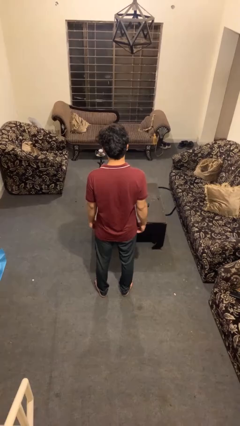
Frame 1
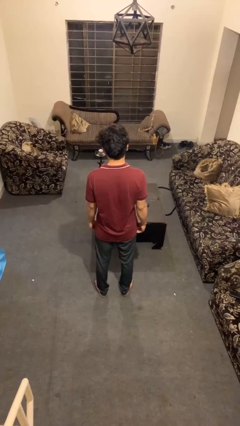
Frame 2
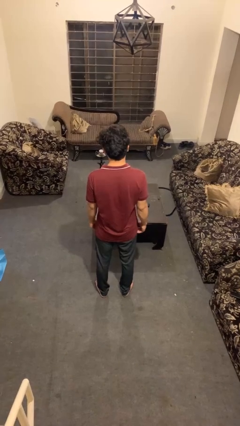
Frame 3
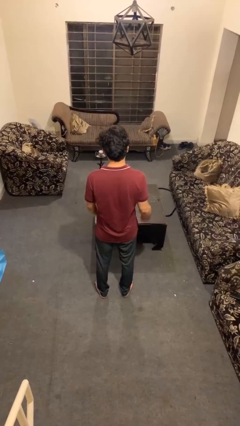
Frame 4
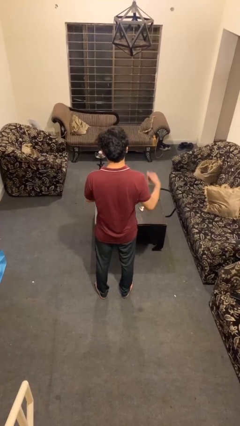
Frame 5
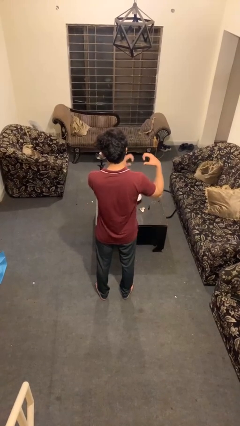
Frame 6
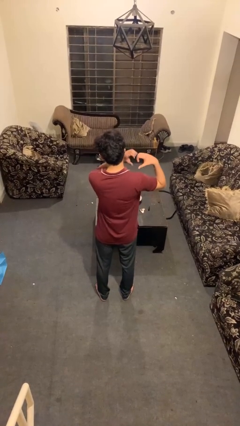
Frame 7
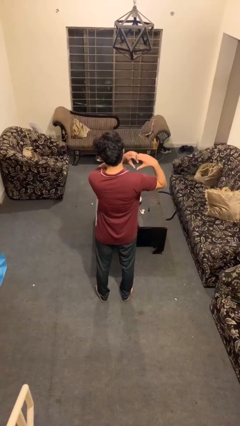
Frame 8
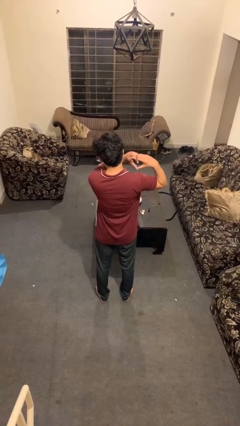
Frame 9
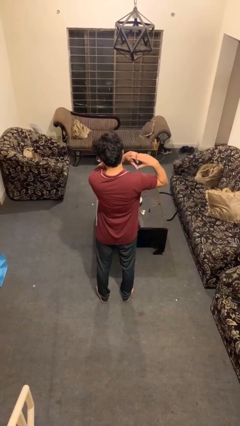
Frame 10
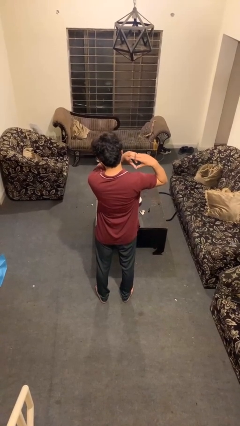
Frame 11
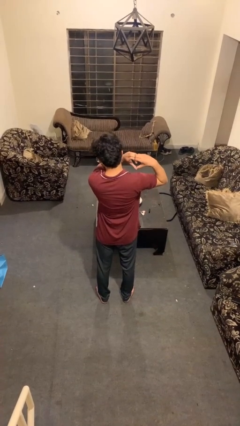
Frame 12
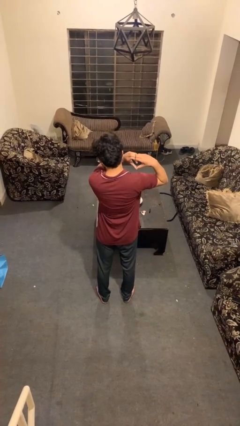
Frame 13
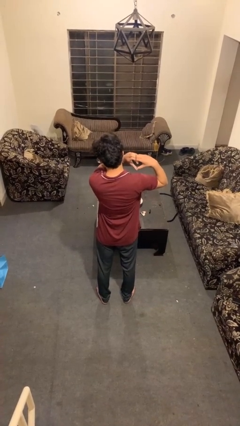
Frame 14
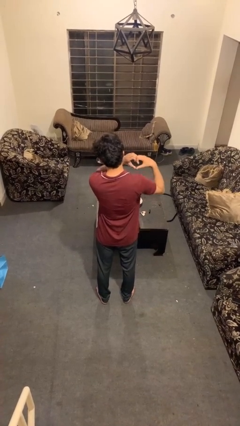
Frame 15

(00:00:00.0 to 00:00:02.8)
person gestures heart

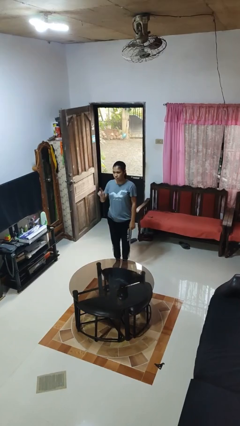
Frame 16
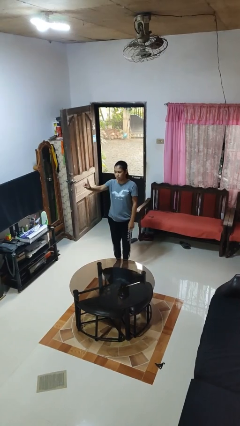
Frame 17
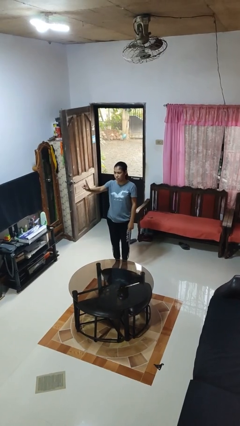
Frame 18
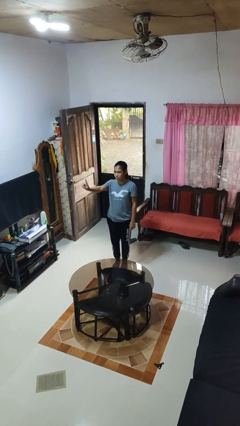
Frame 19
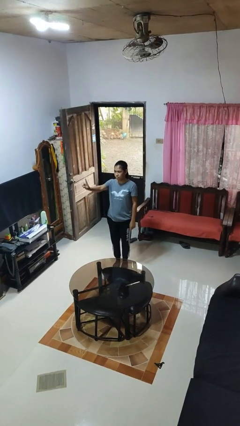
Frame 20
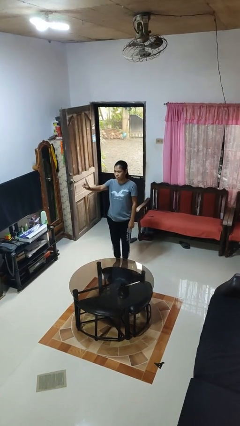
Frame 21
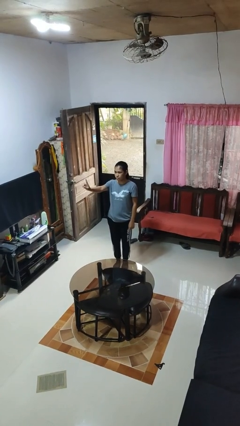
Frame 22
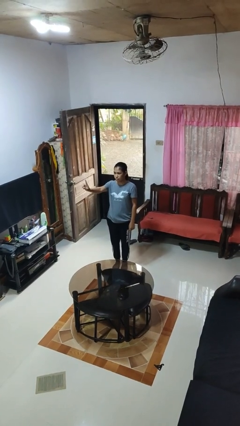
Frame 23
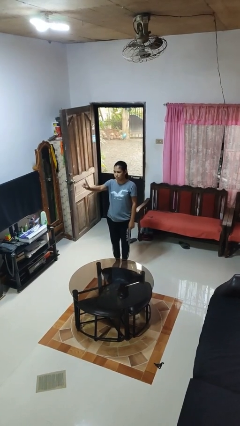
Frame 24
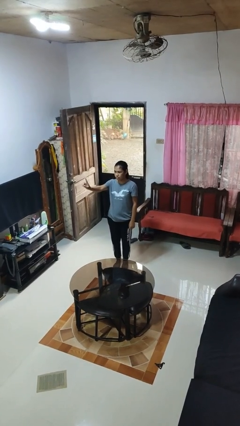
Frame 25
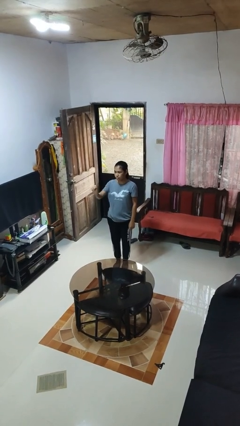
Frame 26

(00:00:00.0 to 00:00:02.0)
person gestures number one

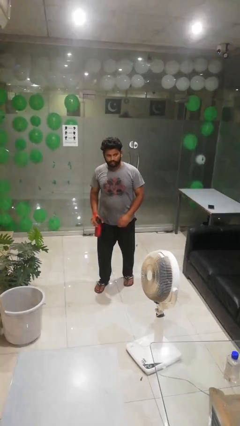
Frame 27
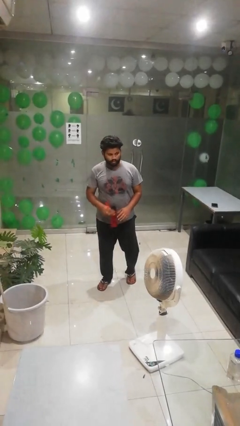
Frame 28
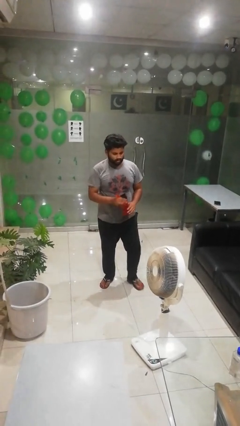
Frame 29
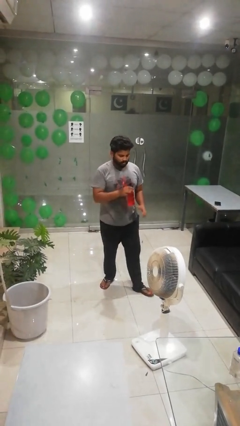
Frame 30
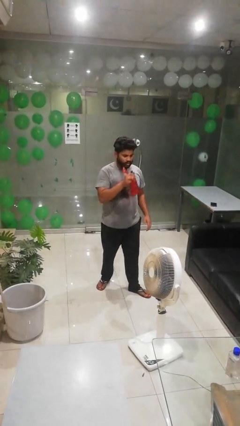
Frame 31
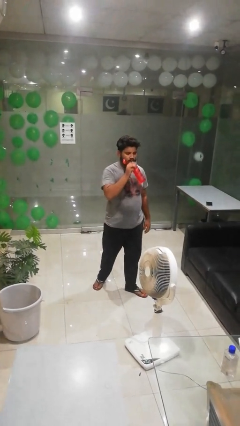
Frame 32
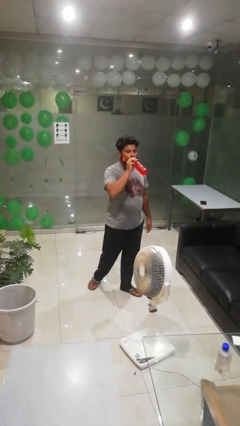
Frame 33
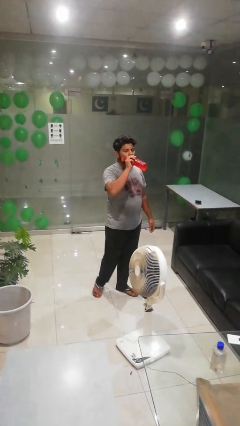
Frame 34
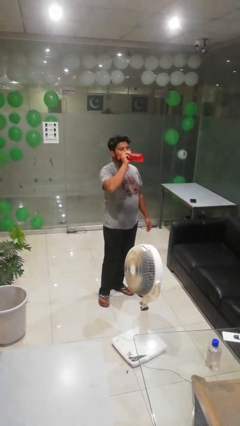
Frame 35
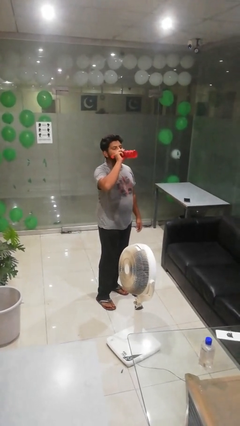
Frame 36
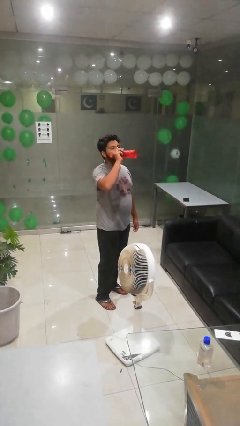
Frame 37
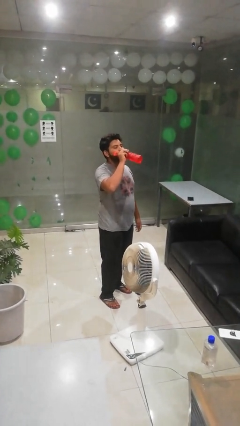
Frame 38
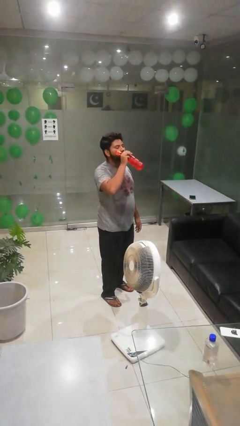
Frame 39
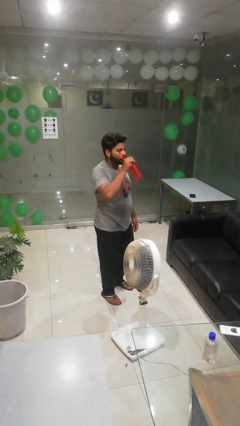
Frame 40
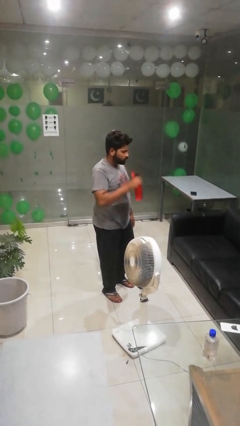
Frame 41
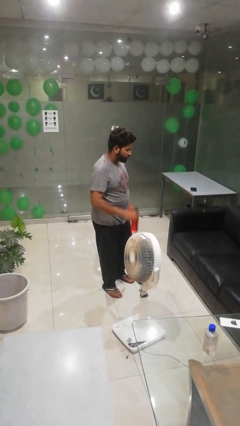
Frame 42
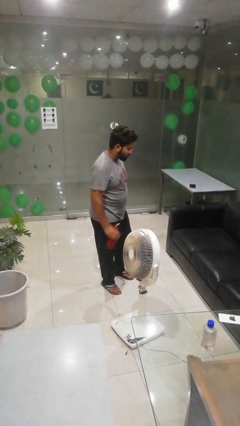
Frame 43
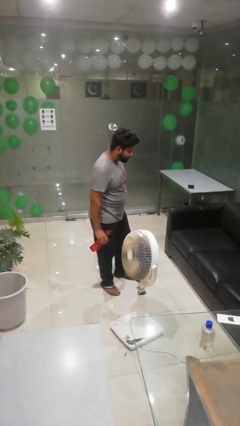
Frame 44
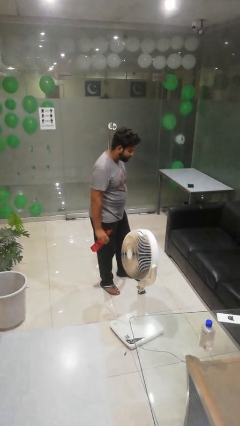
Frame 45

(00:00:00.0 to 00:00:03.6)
person drinks from bottle

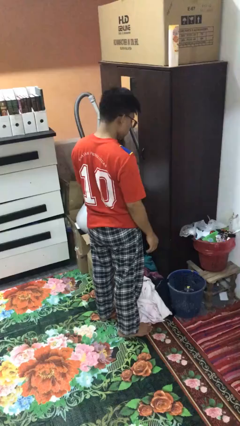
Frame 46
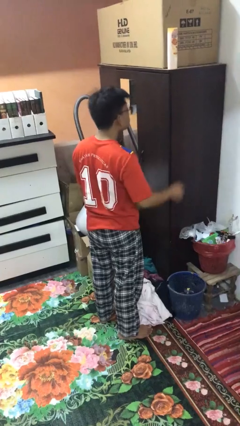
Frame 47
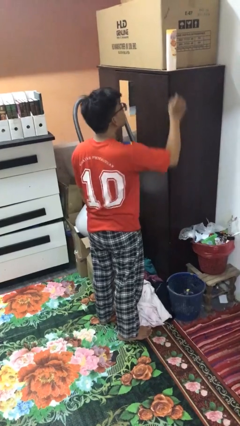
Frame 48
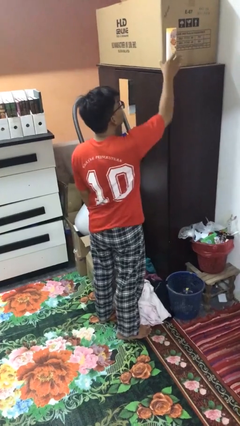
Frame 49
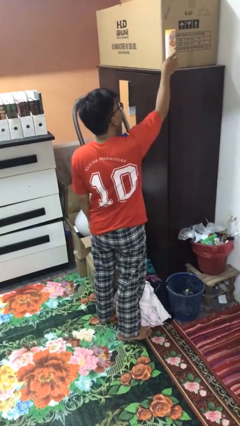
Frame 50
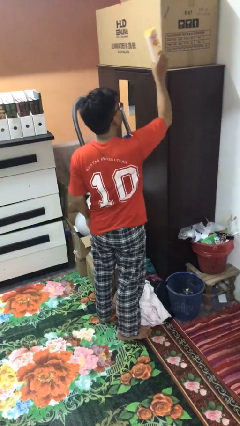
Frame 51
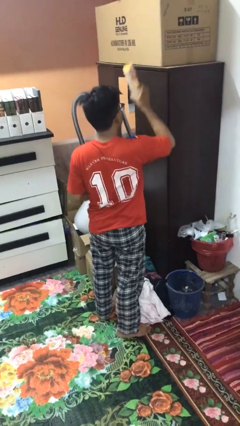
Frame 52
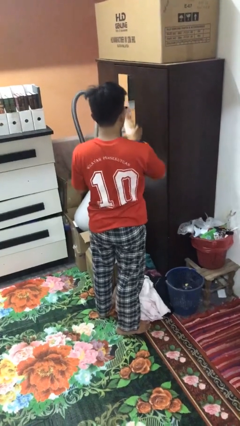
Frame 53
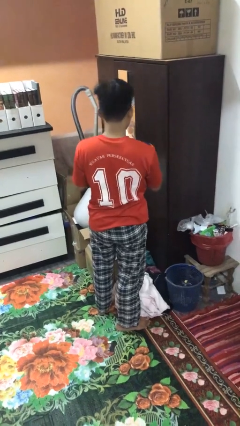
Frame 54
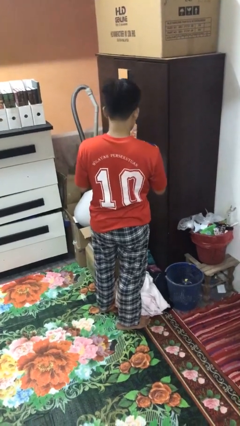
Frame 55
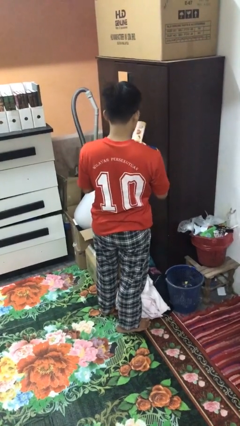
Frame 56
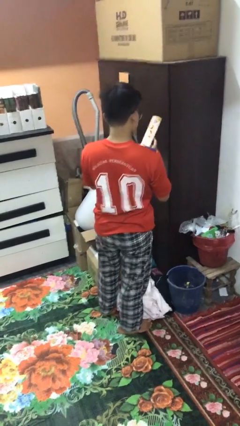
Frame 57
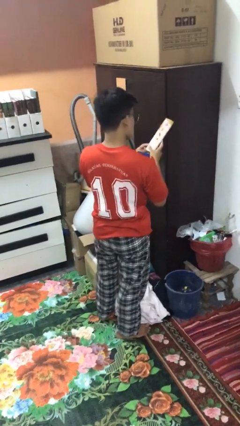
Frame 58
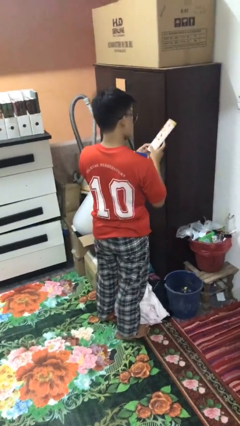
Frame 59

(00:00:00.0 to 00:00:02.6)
person picks up object from shelf

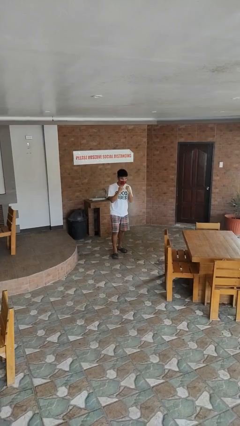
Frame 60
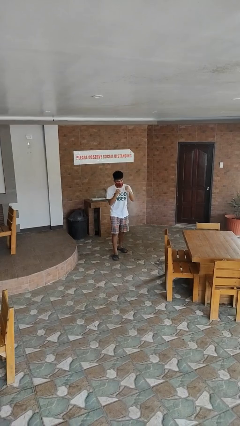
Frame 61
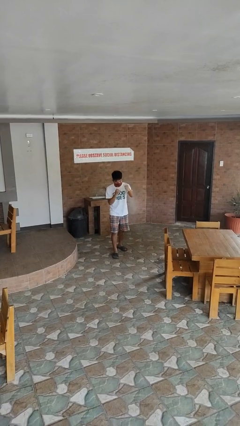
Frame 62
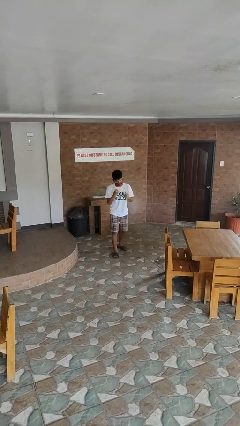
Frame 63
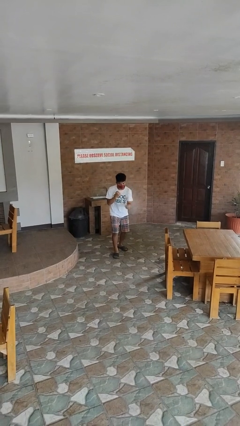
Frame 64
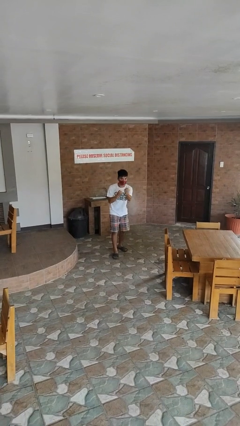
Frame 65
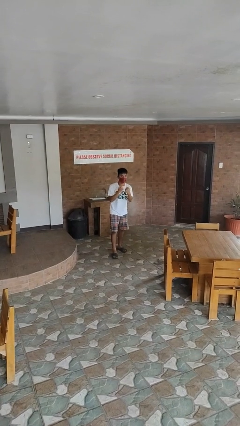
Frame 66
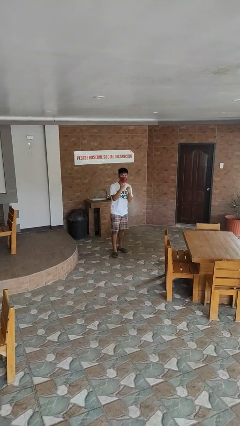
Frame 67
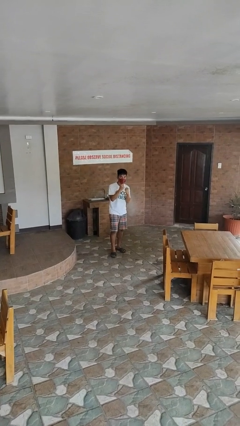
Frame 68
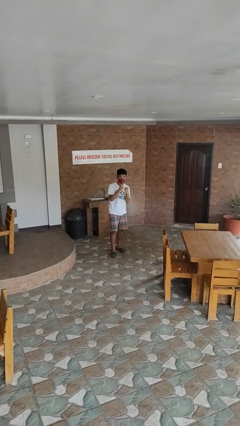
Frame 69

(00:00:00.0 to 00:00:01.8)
person punches

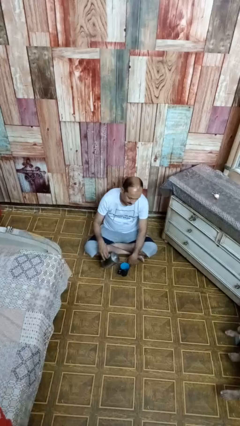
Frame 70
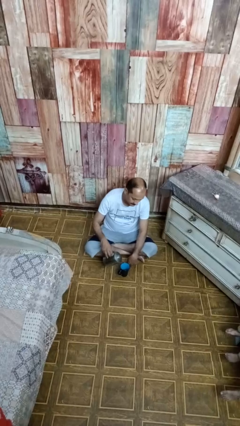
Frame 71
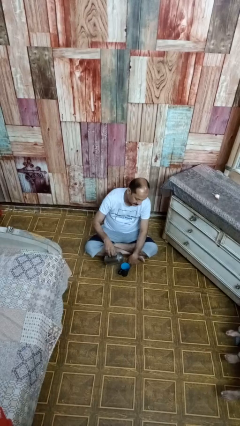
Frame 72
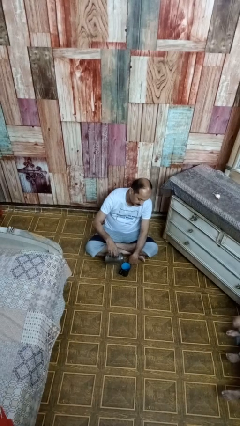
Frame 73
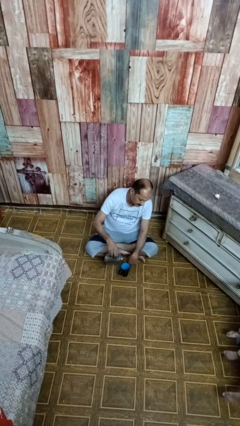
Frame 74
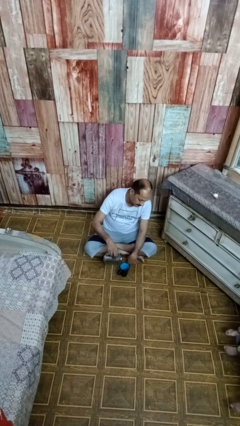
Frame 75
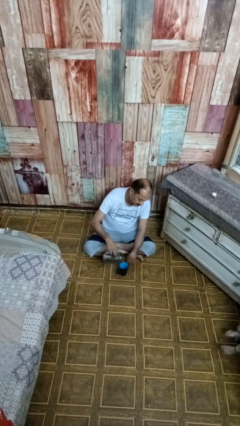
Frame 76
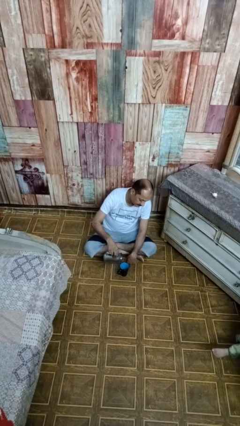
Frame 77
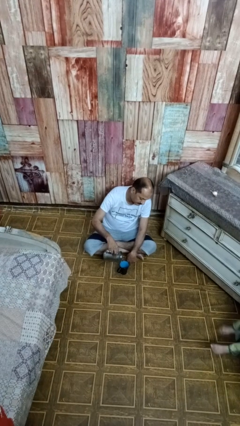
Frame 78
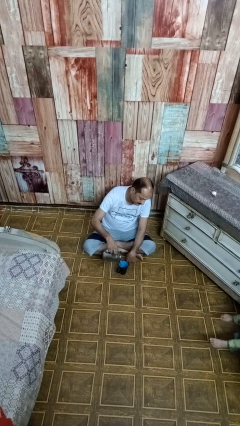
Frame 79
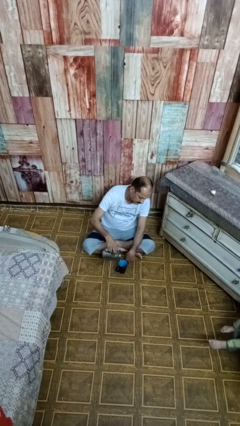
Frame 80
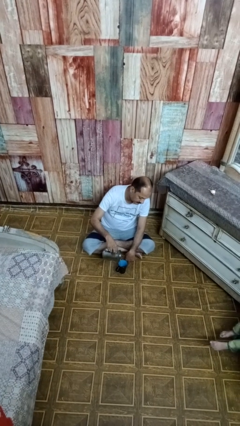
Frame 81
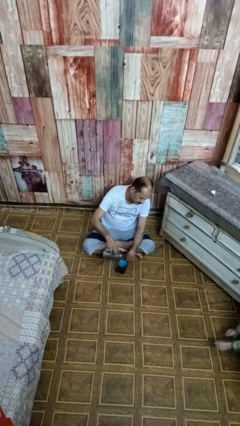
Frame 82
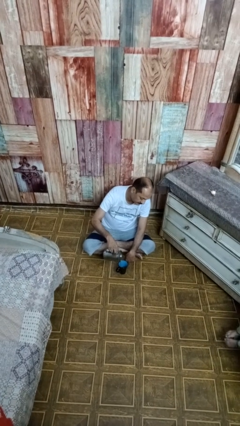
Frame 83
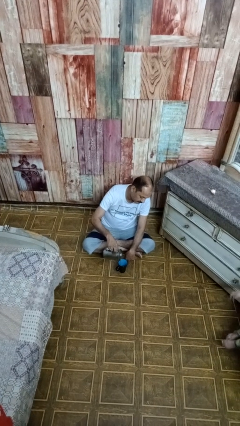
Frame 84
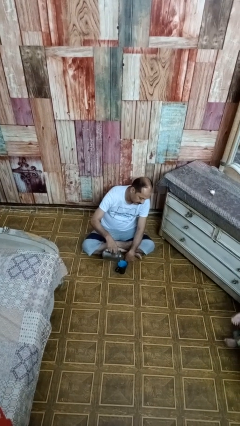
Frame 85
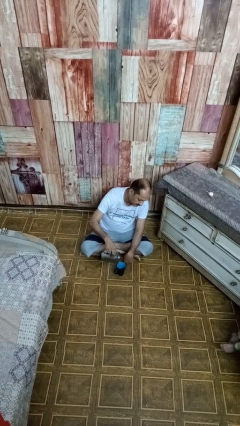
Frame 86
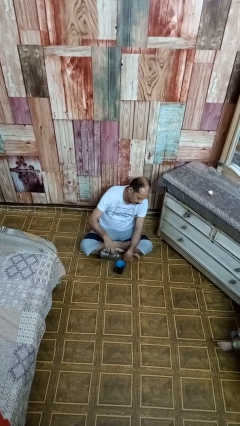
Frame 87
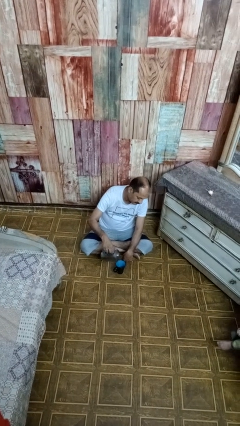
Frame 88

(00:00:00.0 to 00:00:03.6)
person pours coffee into mug

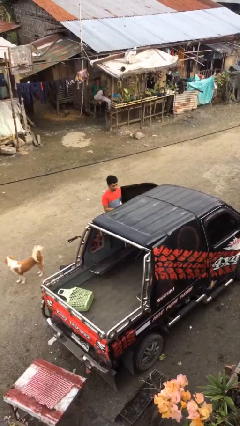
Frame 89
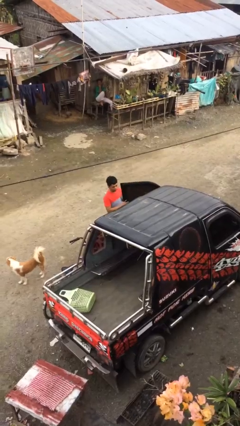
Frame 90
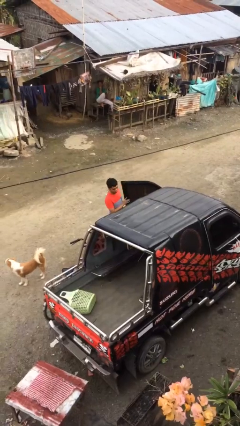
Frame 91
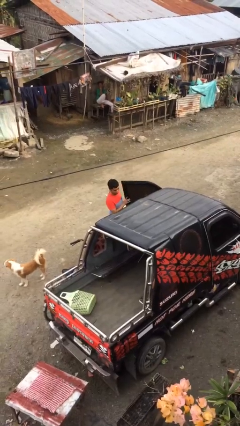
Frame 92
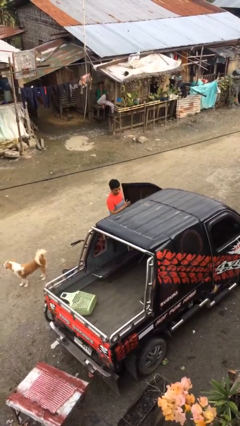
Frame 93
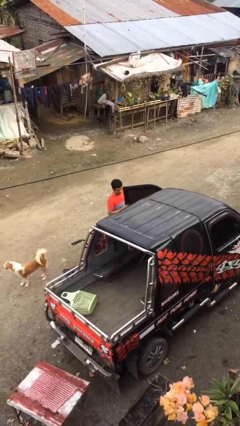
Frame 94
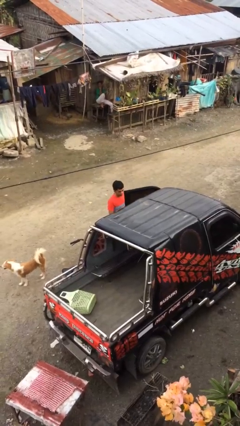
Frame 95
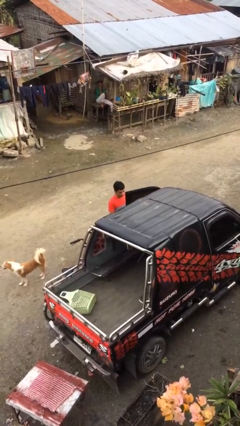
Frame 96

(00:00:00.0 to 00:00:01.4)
person opens car door
